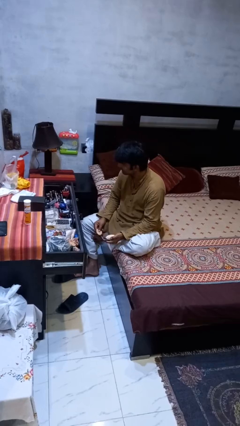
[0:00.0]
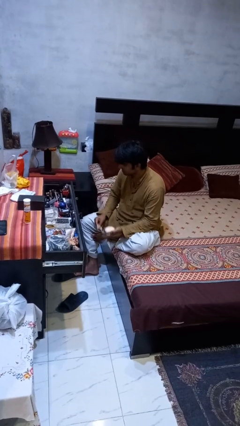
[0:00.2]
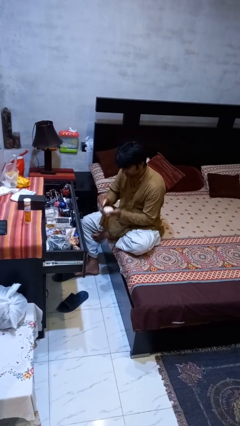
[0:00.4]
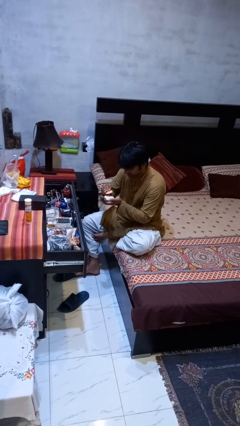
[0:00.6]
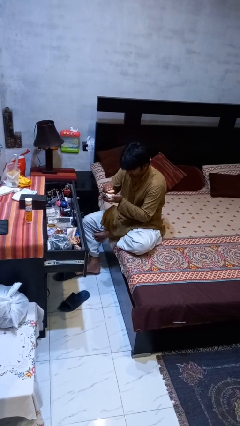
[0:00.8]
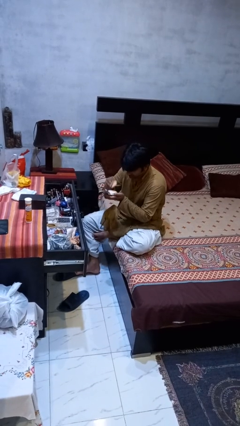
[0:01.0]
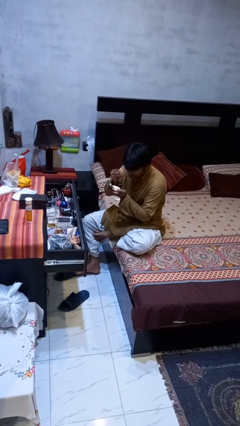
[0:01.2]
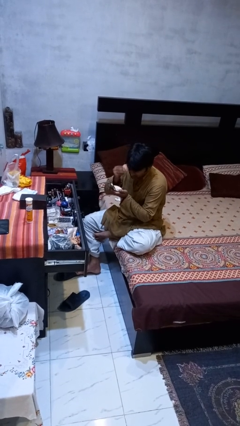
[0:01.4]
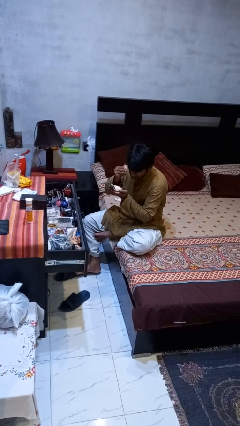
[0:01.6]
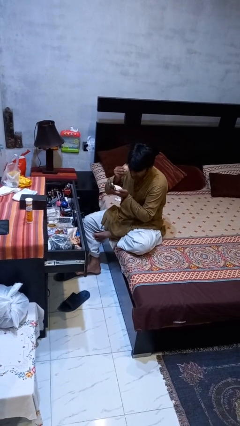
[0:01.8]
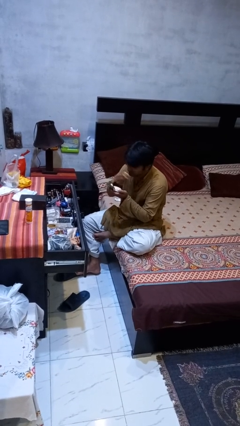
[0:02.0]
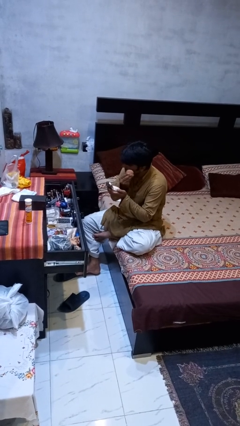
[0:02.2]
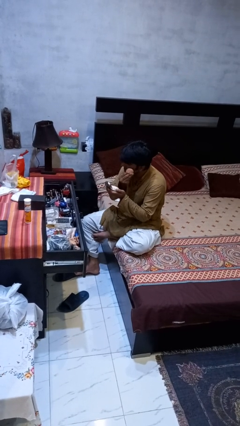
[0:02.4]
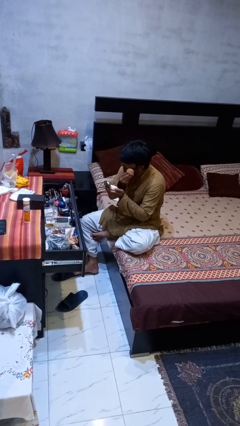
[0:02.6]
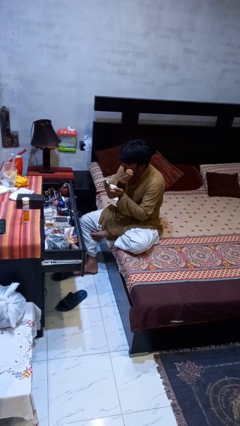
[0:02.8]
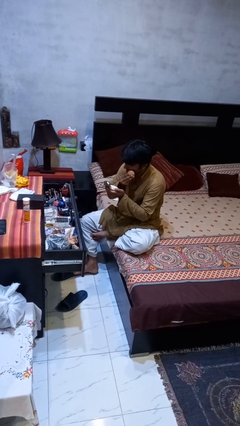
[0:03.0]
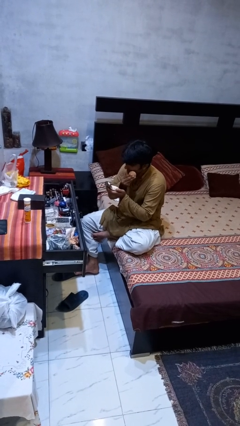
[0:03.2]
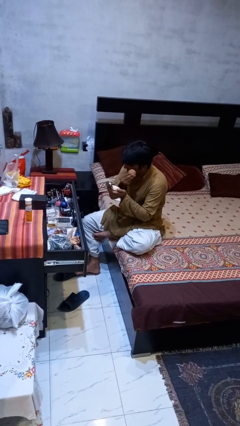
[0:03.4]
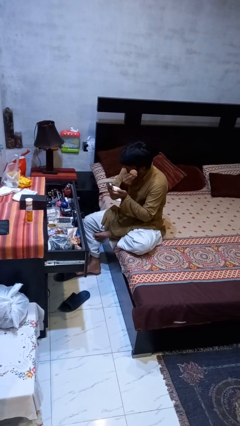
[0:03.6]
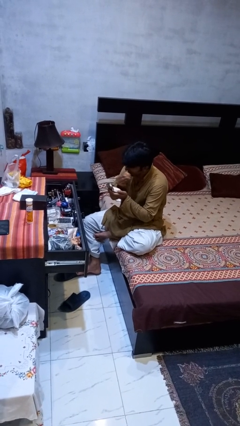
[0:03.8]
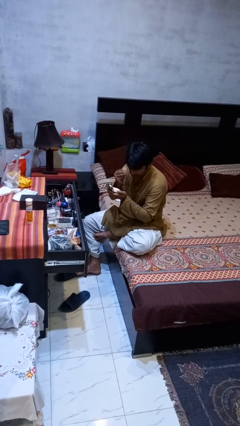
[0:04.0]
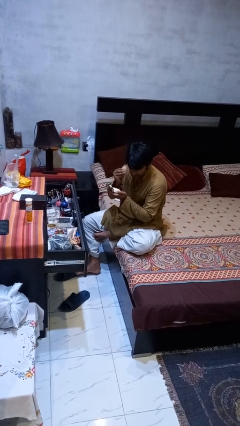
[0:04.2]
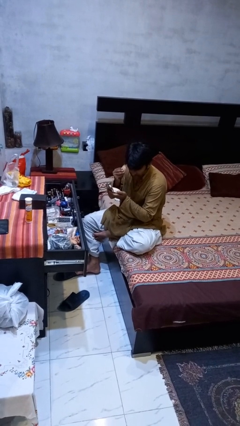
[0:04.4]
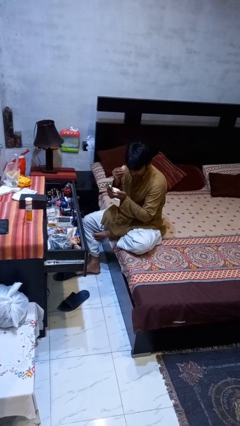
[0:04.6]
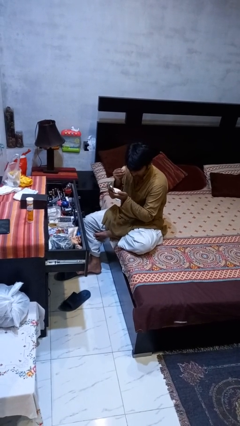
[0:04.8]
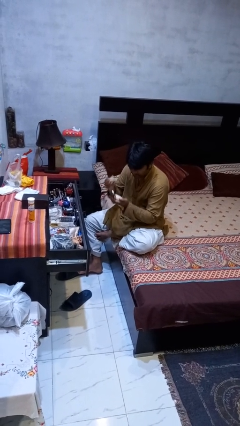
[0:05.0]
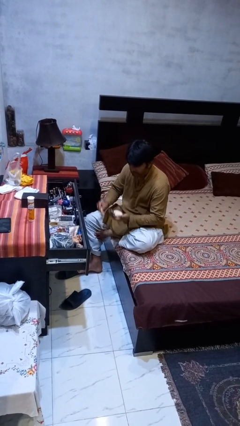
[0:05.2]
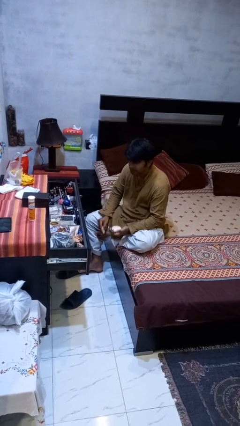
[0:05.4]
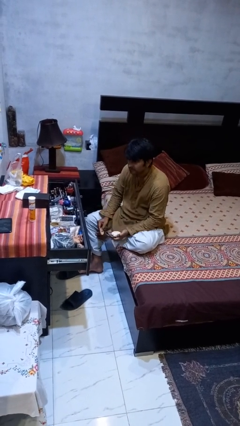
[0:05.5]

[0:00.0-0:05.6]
person applies foundation makeup

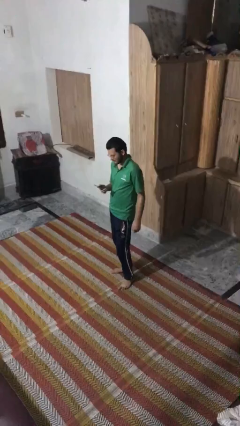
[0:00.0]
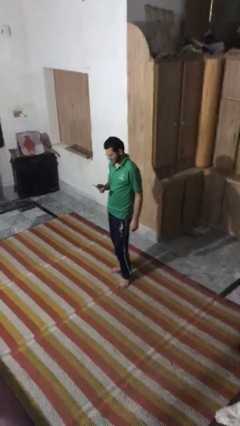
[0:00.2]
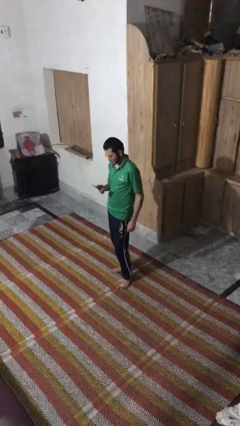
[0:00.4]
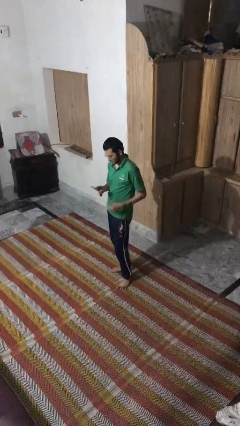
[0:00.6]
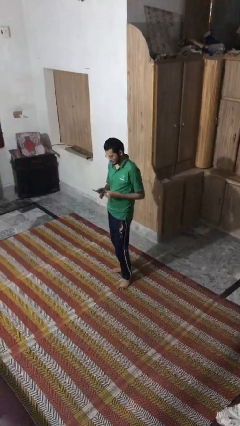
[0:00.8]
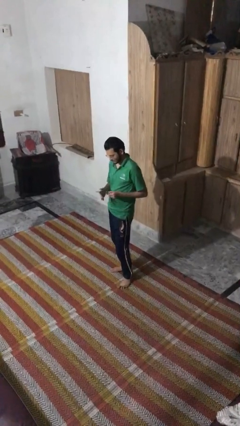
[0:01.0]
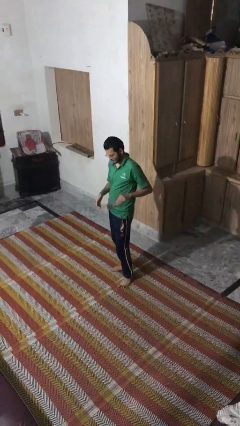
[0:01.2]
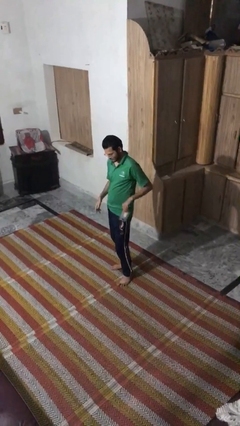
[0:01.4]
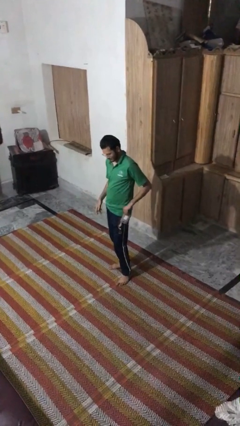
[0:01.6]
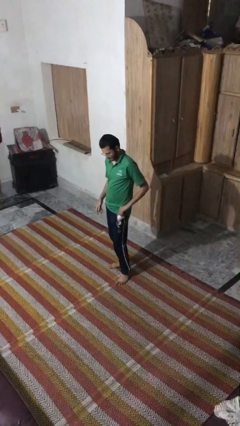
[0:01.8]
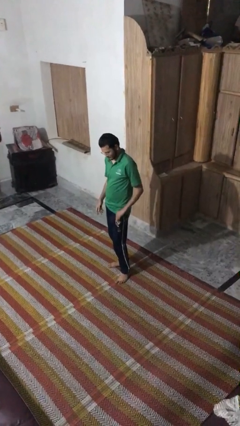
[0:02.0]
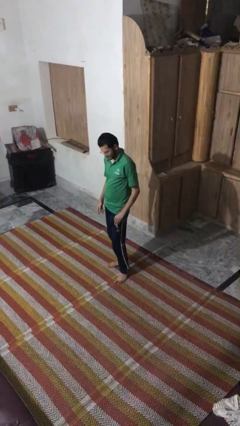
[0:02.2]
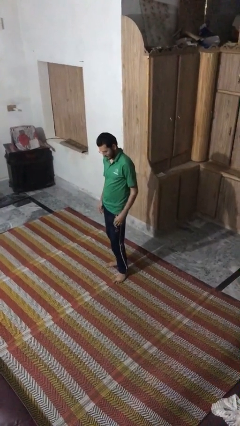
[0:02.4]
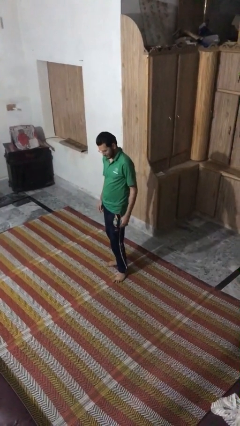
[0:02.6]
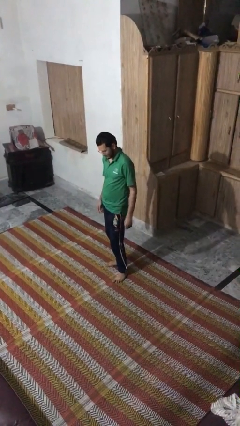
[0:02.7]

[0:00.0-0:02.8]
person puts phone into pocket

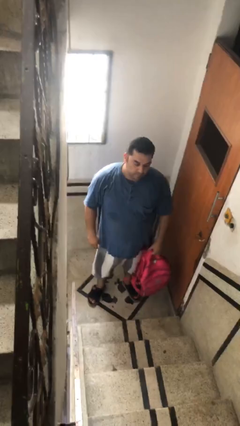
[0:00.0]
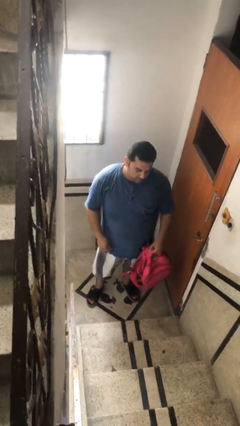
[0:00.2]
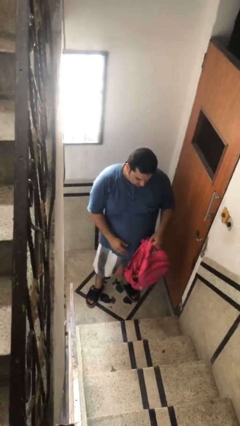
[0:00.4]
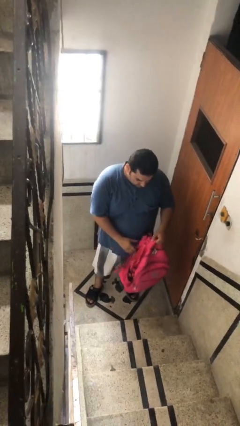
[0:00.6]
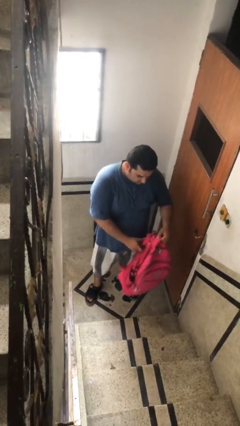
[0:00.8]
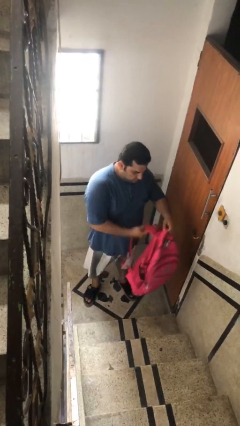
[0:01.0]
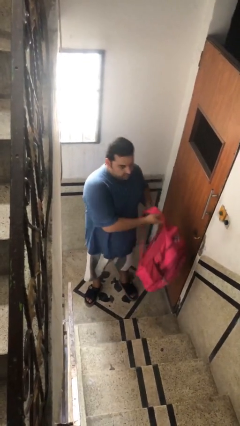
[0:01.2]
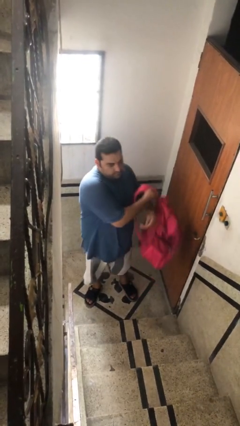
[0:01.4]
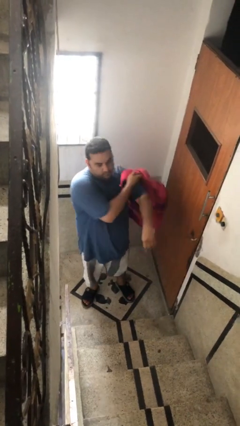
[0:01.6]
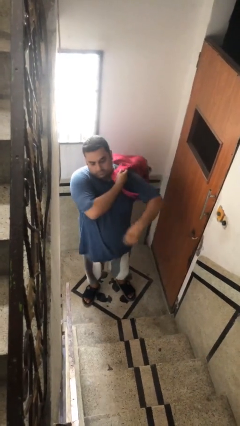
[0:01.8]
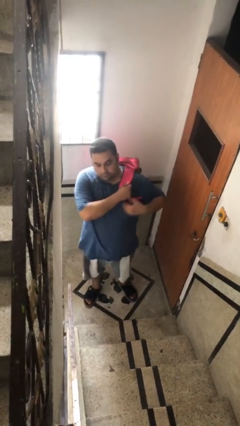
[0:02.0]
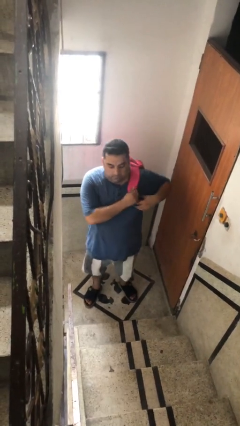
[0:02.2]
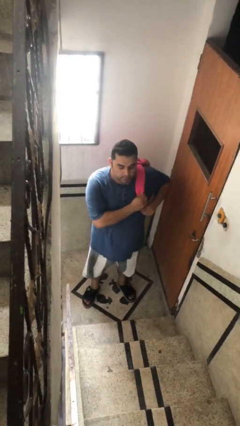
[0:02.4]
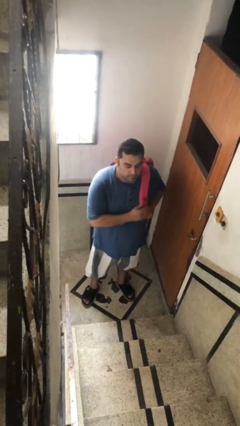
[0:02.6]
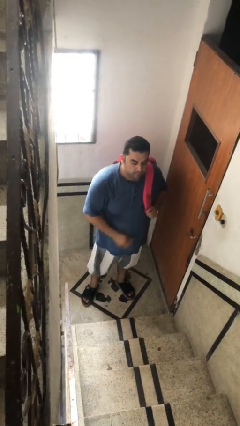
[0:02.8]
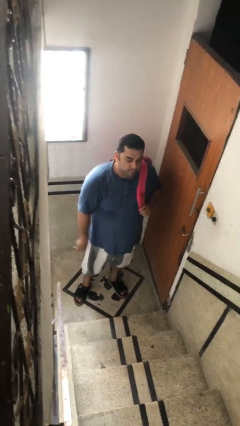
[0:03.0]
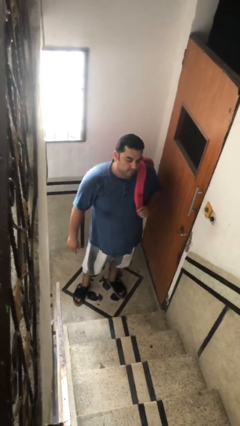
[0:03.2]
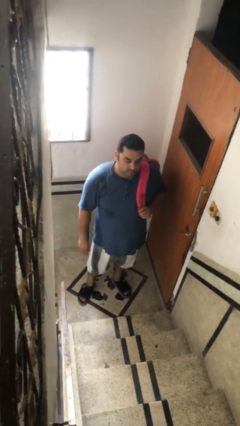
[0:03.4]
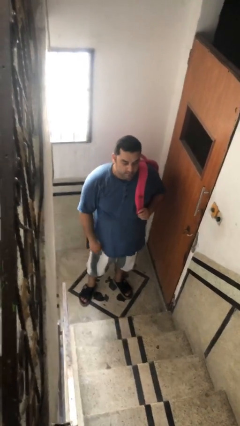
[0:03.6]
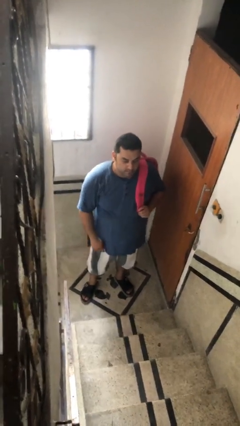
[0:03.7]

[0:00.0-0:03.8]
person puts on backpack

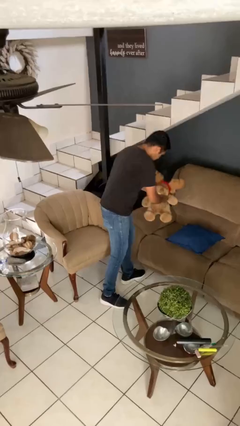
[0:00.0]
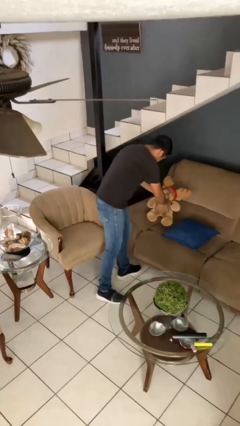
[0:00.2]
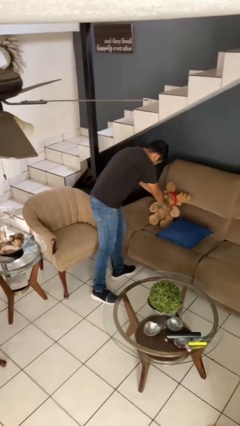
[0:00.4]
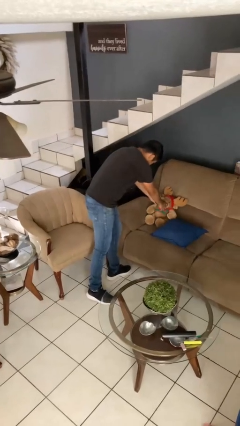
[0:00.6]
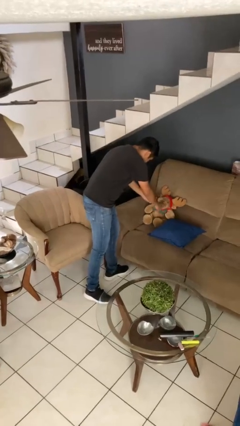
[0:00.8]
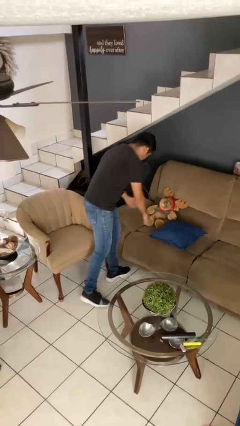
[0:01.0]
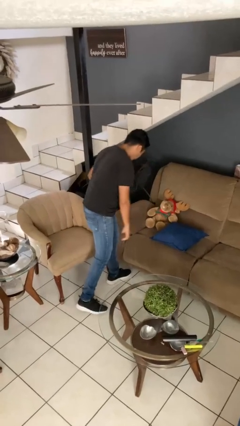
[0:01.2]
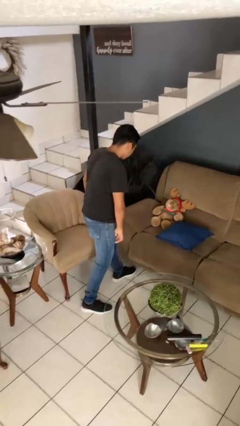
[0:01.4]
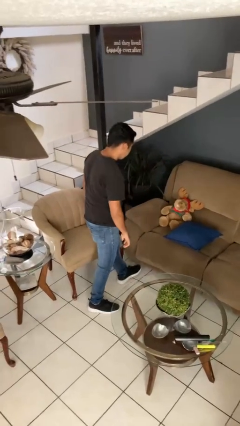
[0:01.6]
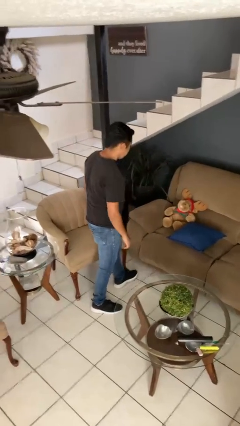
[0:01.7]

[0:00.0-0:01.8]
person puts down object on couch

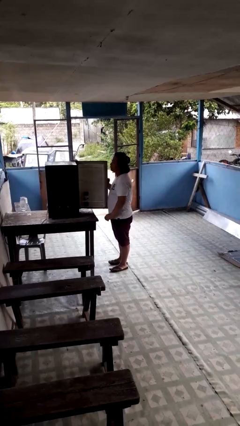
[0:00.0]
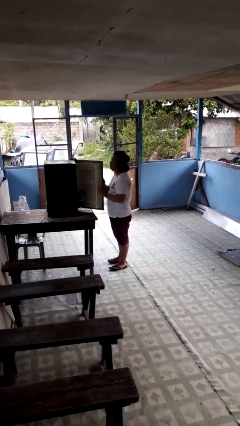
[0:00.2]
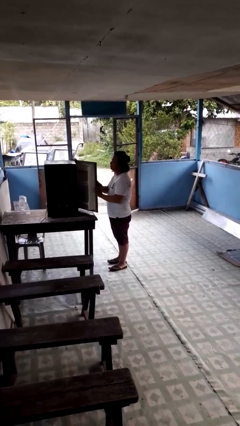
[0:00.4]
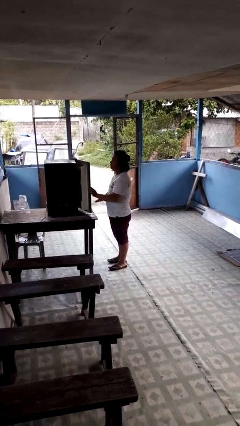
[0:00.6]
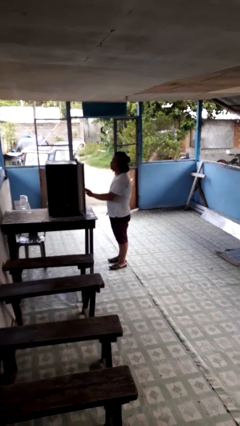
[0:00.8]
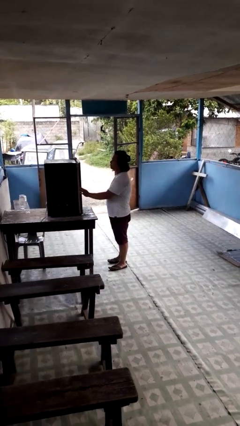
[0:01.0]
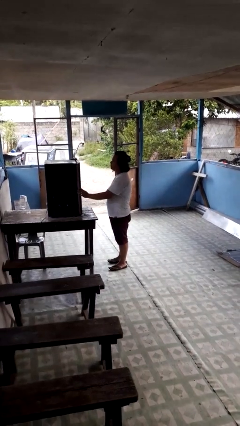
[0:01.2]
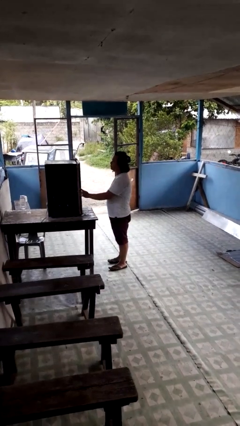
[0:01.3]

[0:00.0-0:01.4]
person closes refrigerator

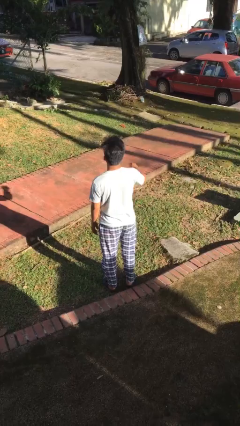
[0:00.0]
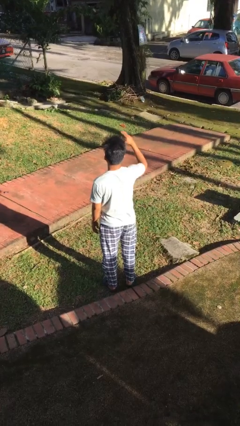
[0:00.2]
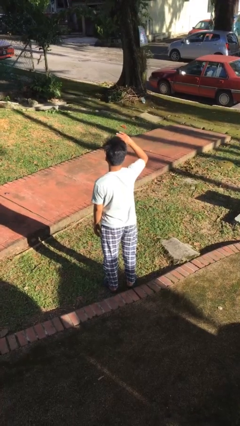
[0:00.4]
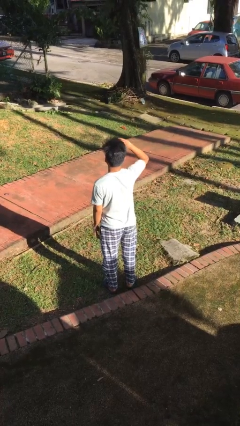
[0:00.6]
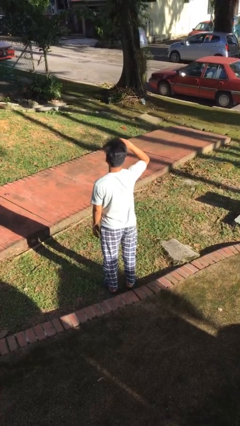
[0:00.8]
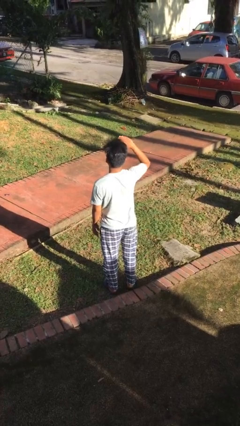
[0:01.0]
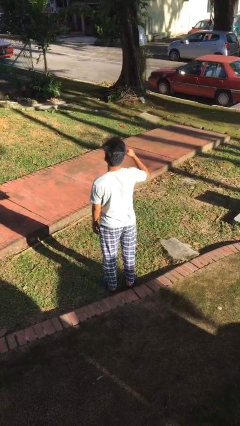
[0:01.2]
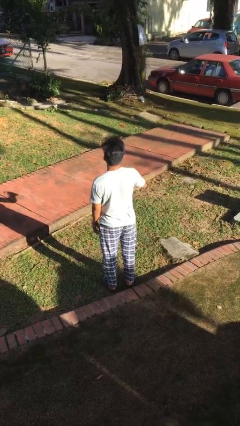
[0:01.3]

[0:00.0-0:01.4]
person salutes

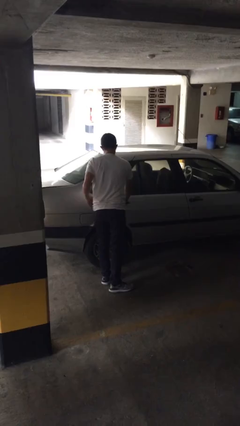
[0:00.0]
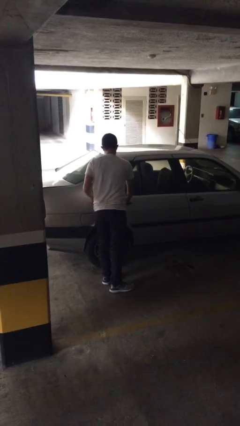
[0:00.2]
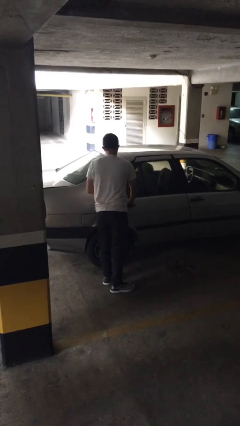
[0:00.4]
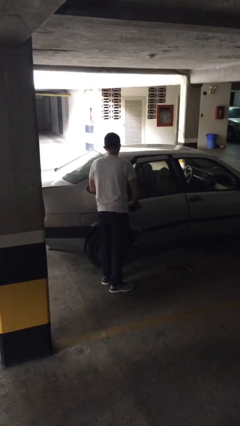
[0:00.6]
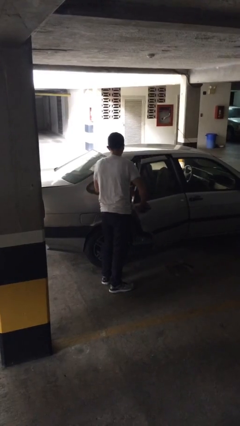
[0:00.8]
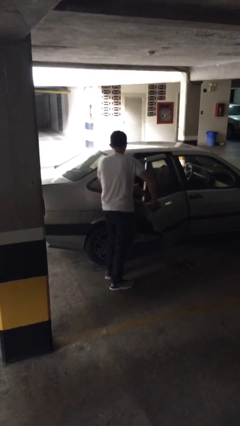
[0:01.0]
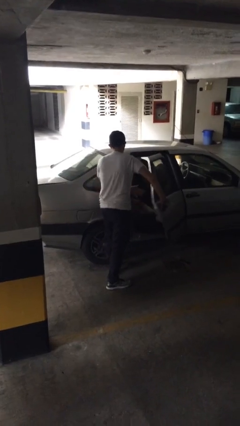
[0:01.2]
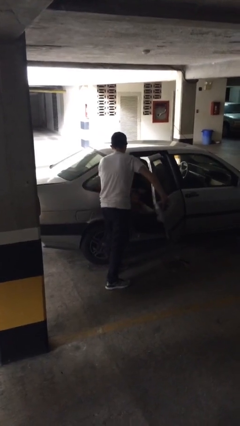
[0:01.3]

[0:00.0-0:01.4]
person opens car door
